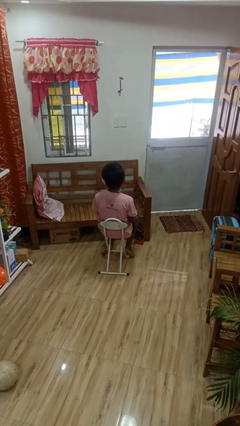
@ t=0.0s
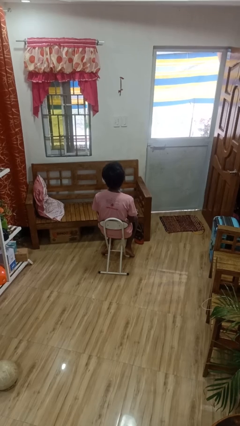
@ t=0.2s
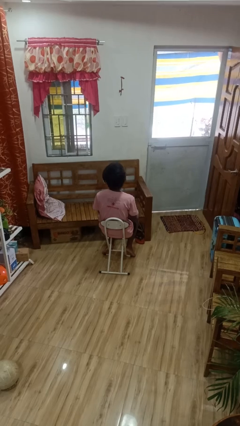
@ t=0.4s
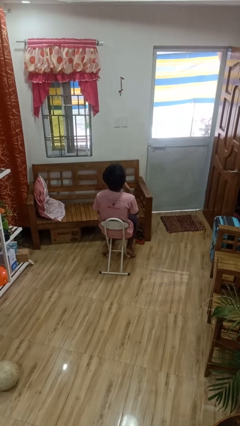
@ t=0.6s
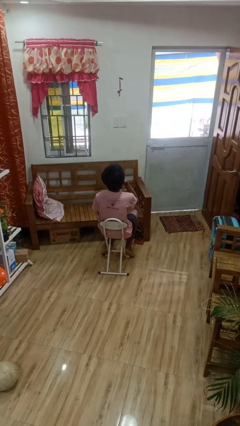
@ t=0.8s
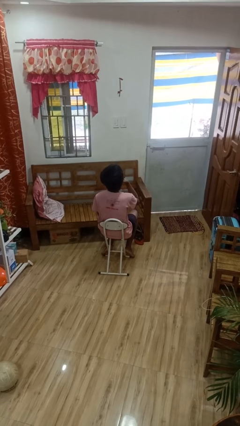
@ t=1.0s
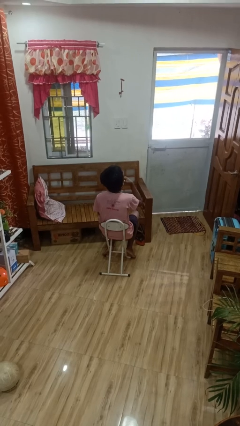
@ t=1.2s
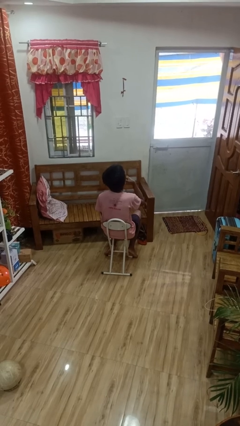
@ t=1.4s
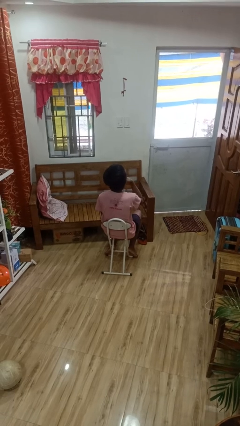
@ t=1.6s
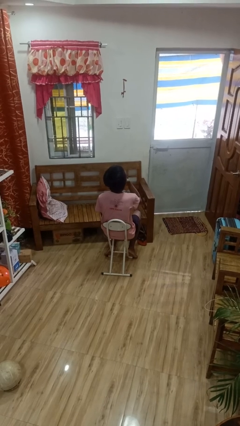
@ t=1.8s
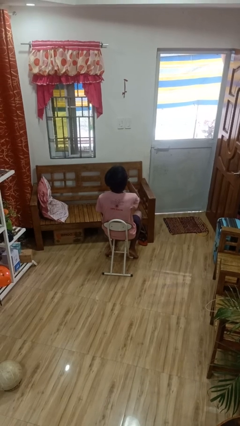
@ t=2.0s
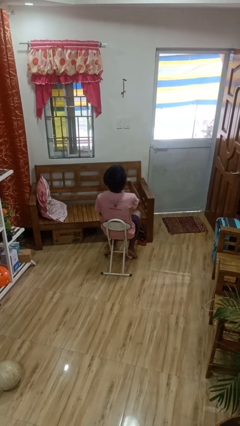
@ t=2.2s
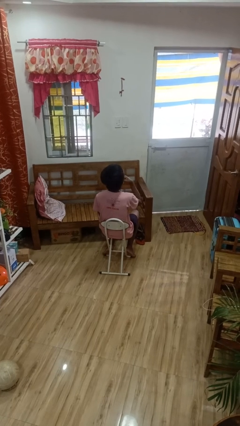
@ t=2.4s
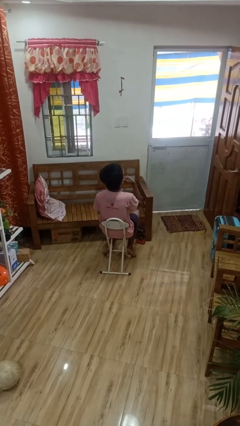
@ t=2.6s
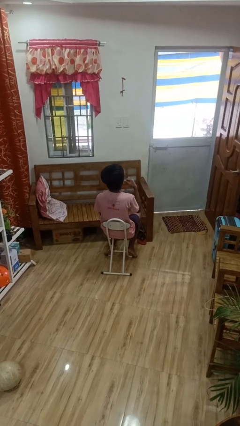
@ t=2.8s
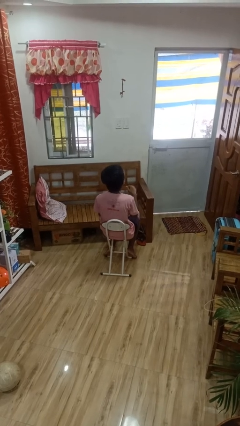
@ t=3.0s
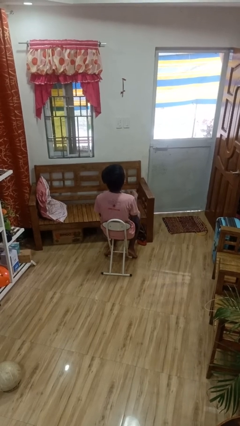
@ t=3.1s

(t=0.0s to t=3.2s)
person strokes chin

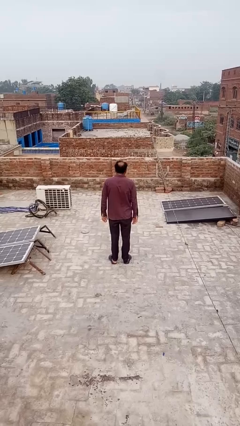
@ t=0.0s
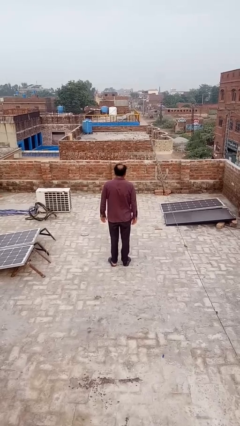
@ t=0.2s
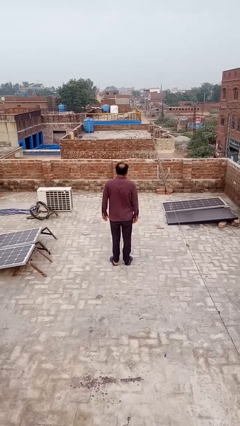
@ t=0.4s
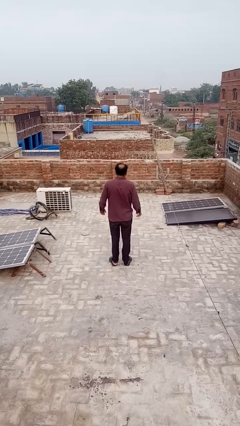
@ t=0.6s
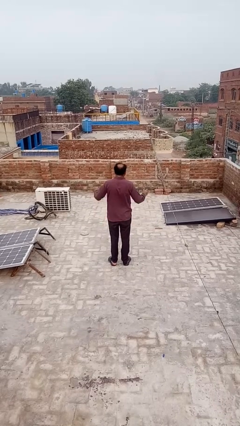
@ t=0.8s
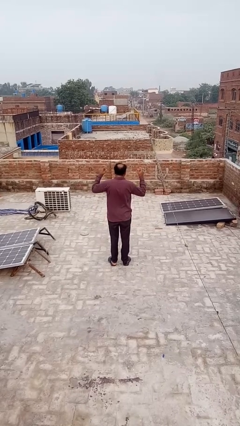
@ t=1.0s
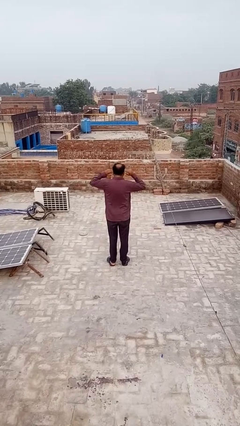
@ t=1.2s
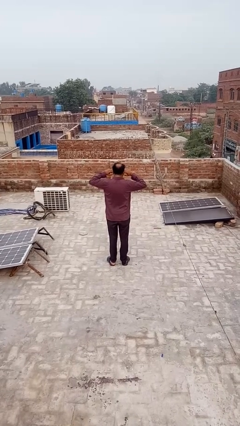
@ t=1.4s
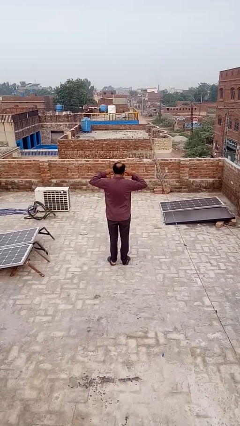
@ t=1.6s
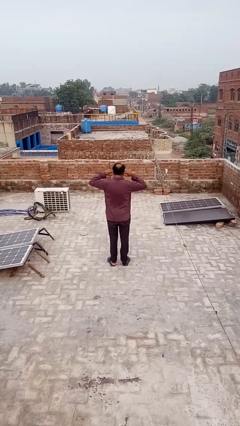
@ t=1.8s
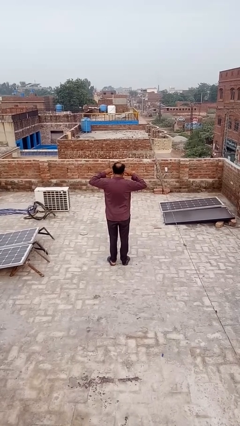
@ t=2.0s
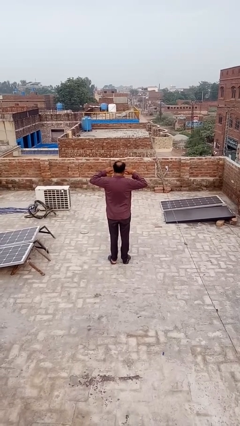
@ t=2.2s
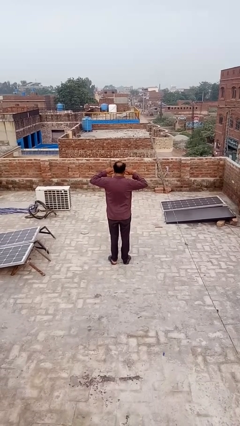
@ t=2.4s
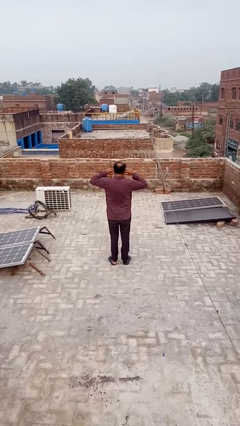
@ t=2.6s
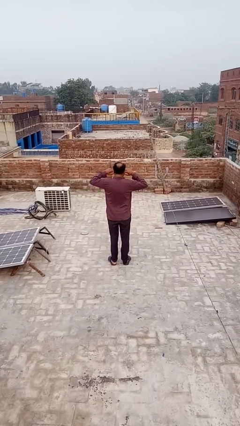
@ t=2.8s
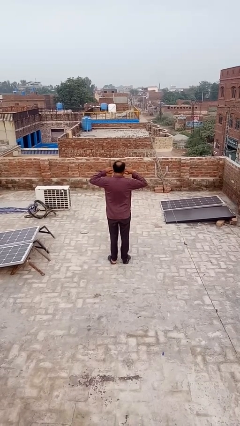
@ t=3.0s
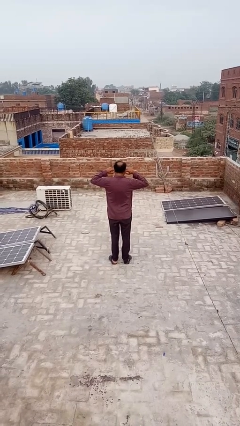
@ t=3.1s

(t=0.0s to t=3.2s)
person puts fingers in ear

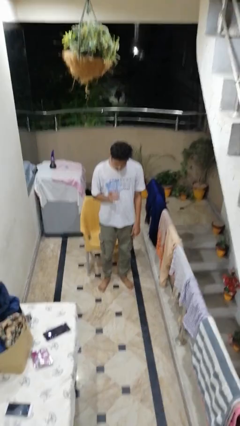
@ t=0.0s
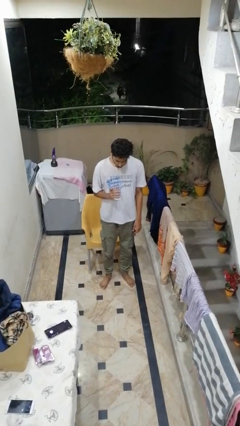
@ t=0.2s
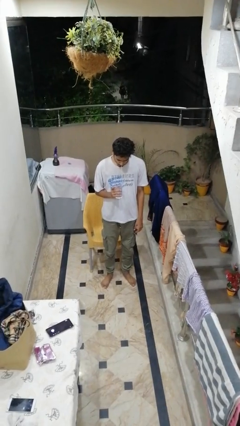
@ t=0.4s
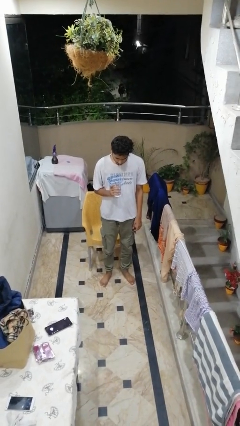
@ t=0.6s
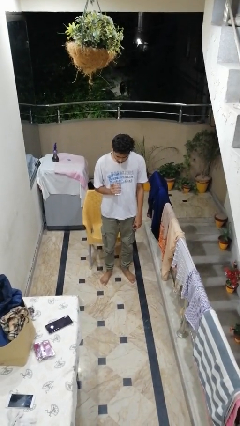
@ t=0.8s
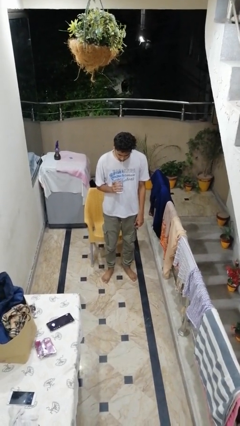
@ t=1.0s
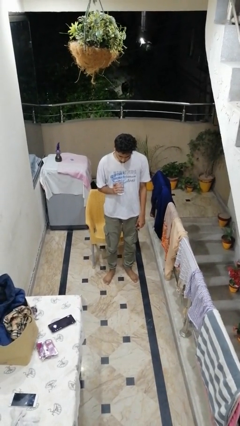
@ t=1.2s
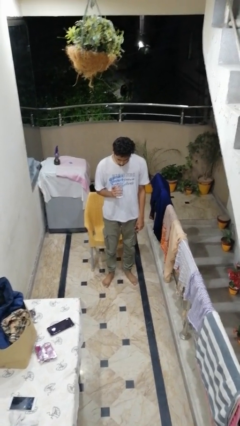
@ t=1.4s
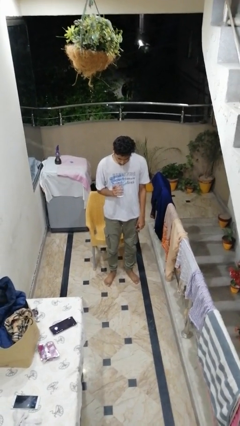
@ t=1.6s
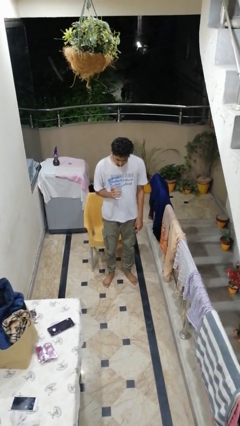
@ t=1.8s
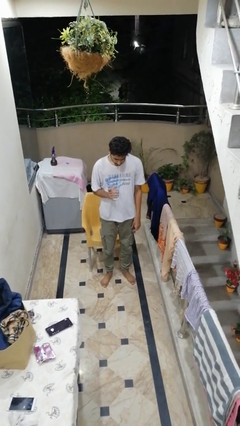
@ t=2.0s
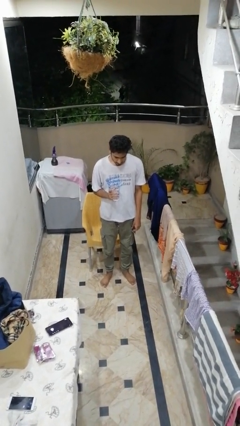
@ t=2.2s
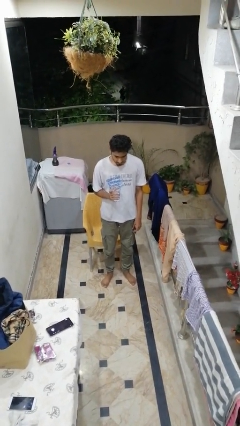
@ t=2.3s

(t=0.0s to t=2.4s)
person drinks from straw

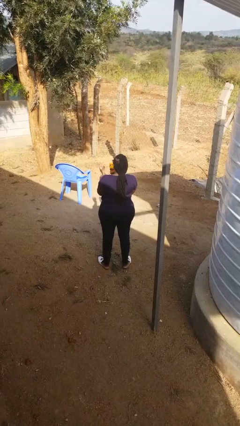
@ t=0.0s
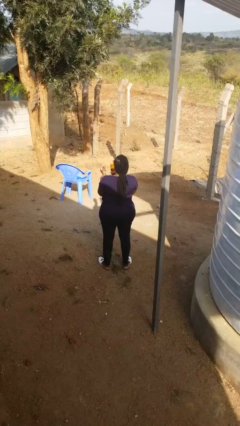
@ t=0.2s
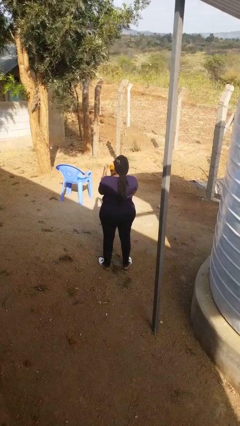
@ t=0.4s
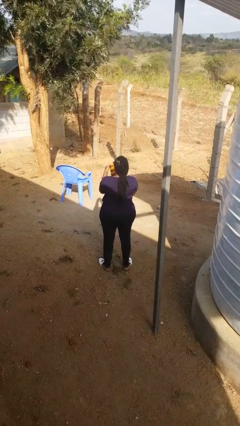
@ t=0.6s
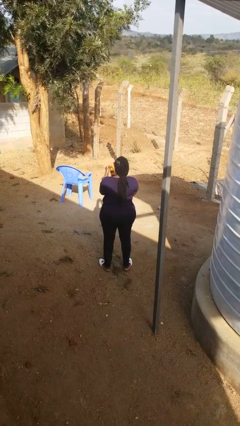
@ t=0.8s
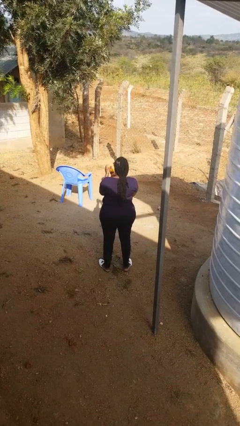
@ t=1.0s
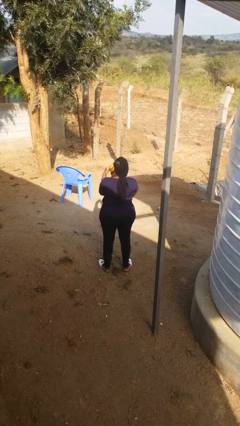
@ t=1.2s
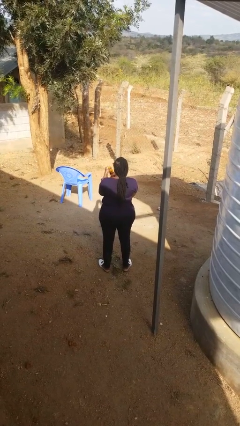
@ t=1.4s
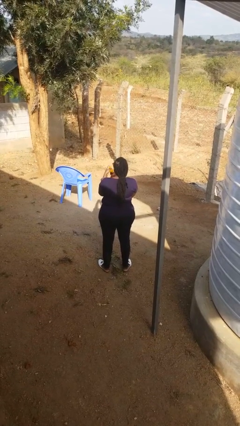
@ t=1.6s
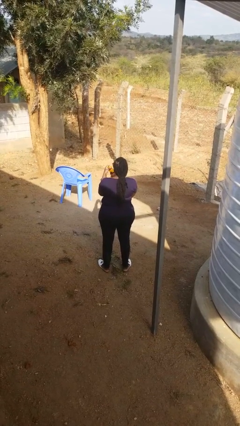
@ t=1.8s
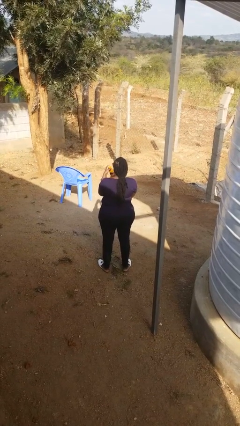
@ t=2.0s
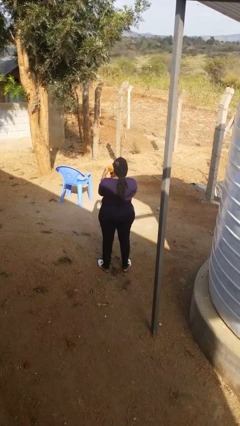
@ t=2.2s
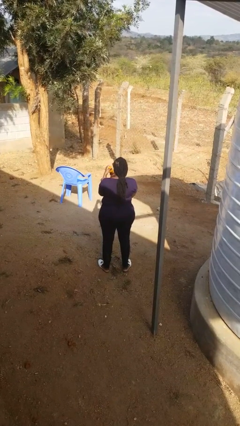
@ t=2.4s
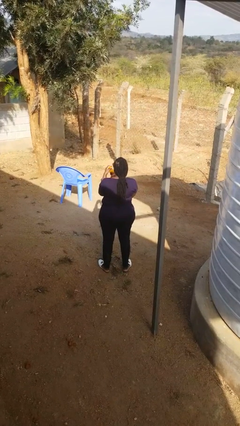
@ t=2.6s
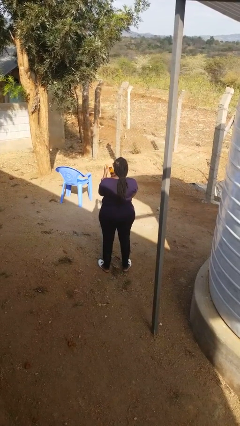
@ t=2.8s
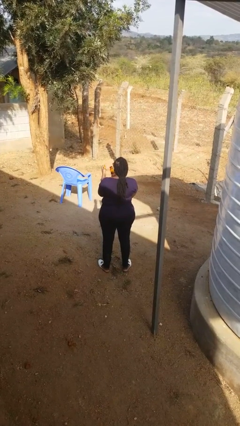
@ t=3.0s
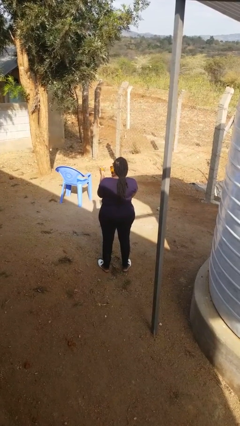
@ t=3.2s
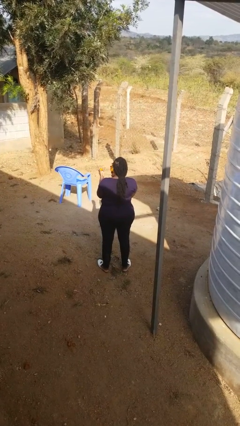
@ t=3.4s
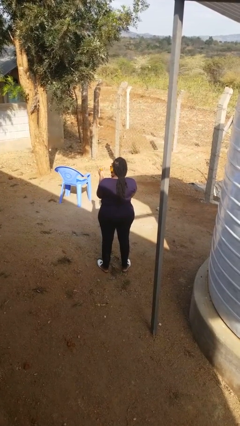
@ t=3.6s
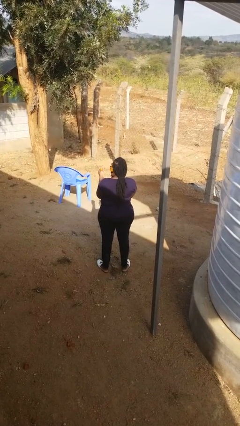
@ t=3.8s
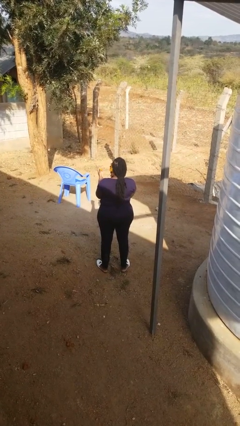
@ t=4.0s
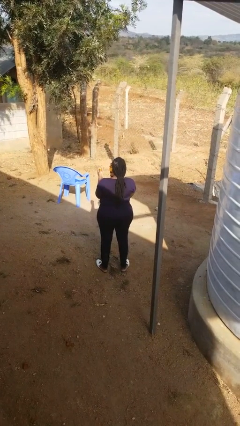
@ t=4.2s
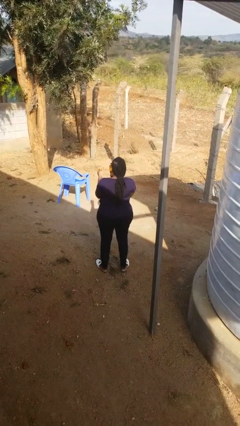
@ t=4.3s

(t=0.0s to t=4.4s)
person opens jar

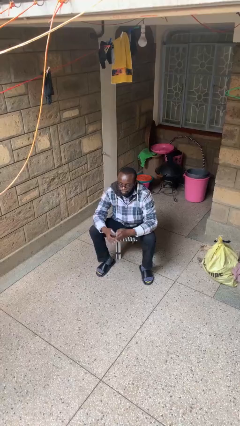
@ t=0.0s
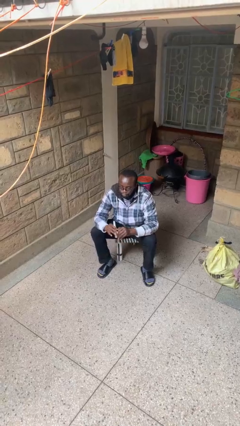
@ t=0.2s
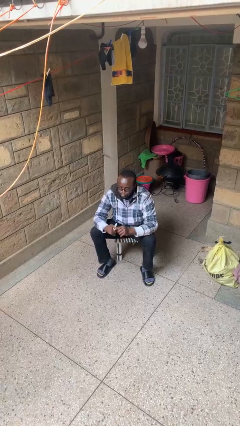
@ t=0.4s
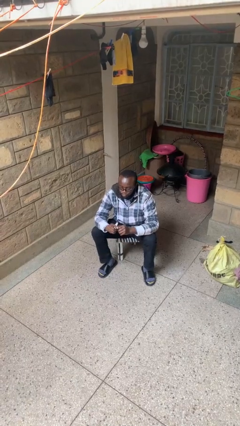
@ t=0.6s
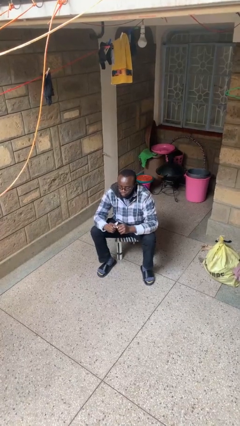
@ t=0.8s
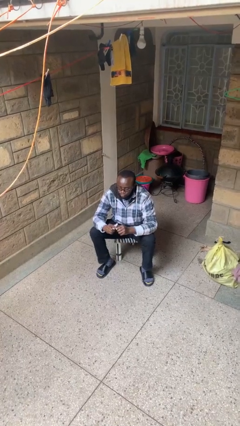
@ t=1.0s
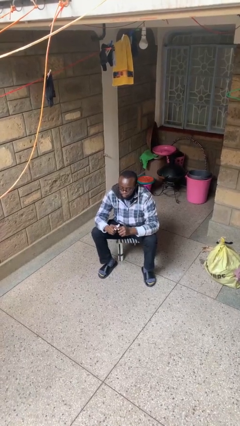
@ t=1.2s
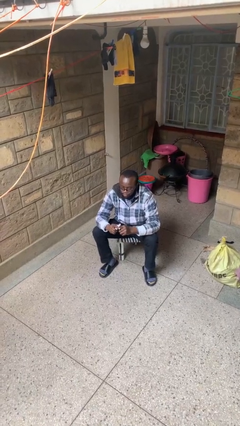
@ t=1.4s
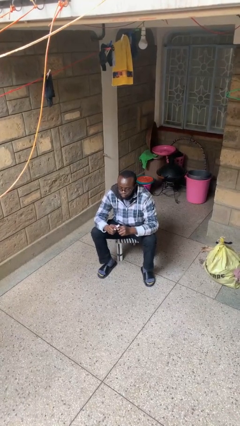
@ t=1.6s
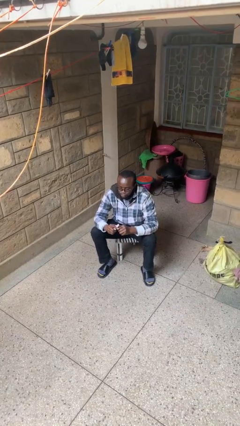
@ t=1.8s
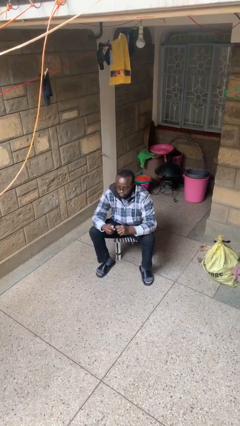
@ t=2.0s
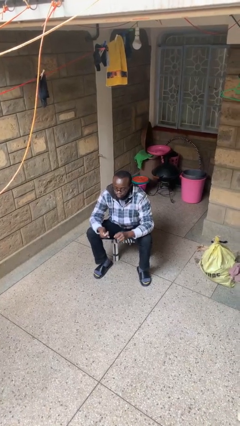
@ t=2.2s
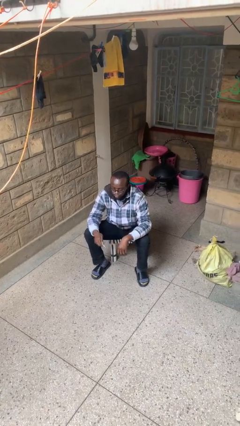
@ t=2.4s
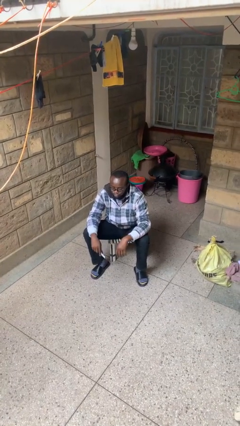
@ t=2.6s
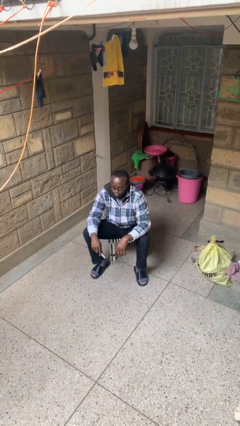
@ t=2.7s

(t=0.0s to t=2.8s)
person files fingernails

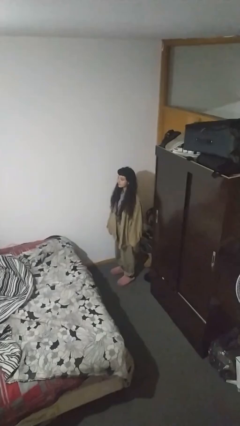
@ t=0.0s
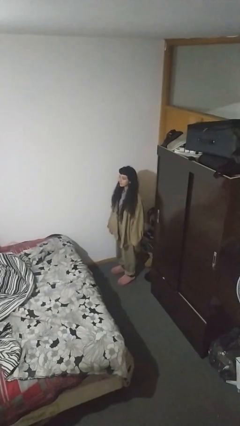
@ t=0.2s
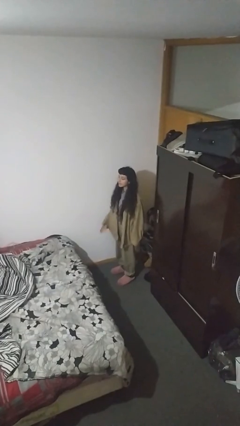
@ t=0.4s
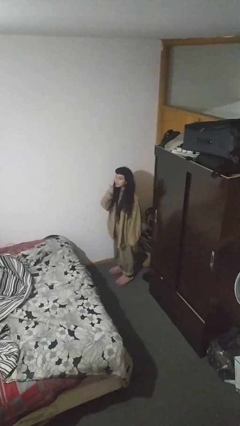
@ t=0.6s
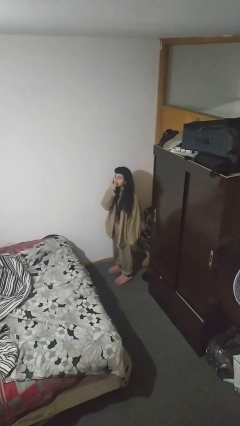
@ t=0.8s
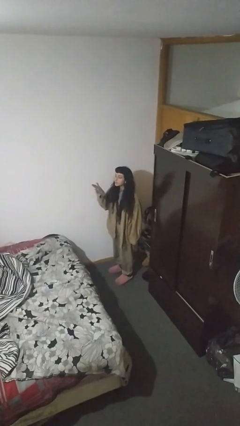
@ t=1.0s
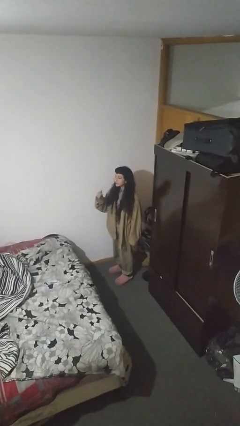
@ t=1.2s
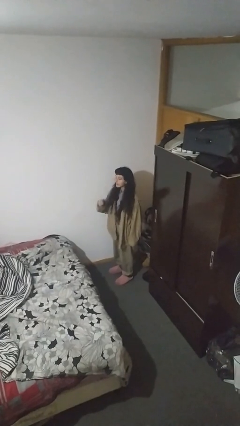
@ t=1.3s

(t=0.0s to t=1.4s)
person gestures blow kiss

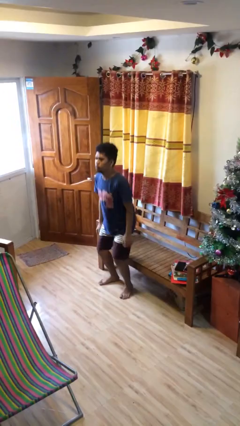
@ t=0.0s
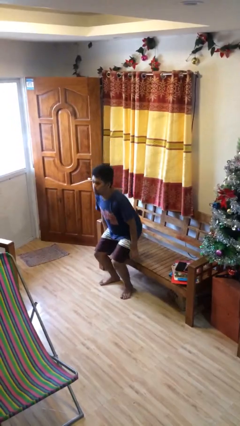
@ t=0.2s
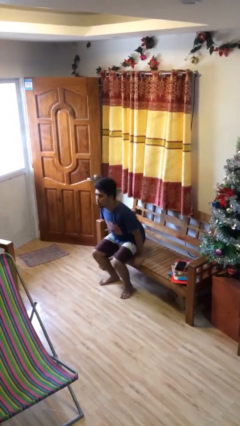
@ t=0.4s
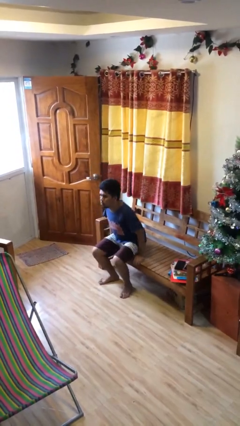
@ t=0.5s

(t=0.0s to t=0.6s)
person sits down
